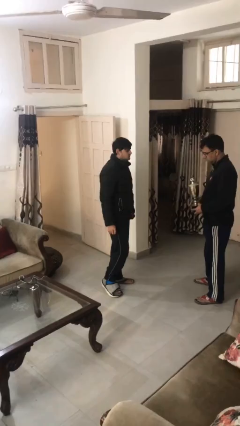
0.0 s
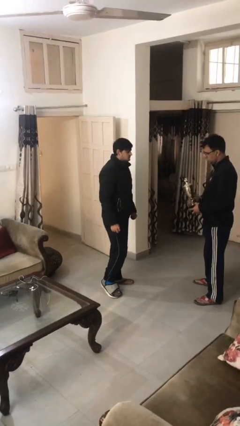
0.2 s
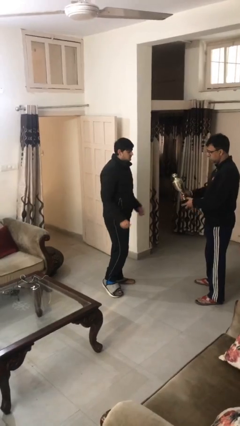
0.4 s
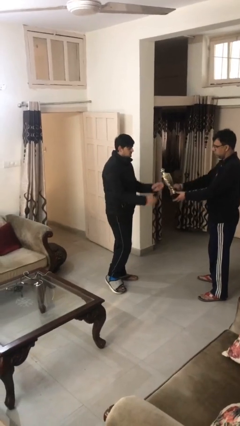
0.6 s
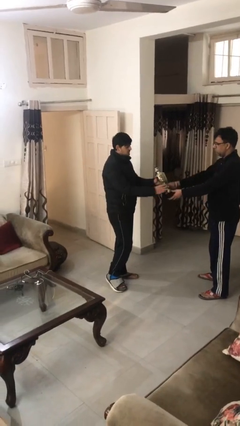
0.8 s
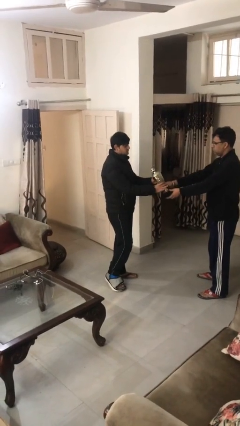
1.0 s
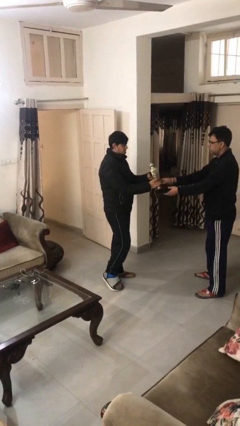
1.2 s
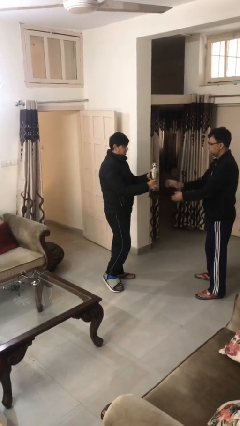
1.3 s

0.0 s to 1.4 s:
person transfers object to person

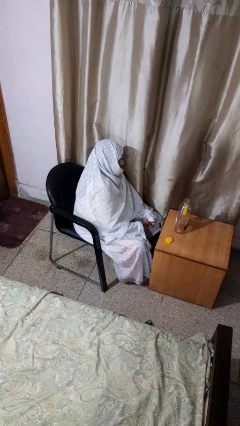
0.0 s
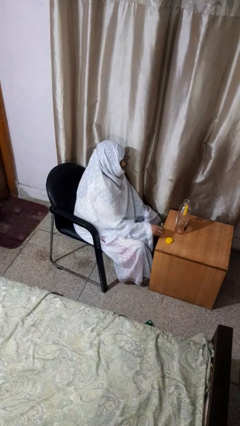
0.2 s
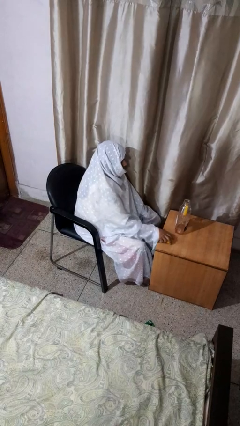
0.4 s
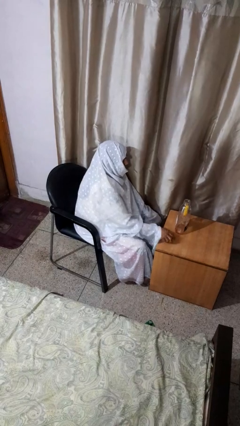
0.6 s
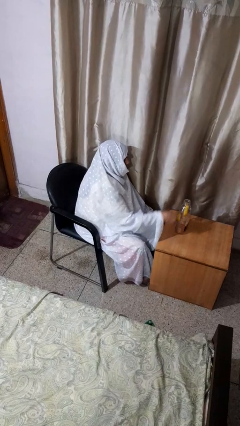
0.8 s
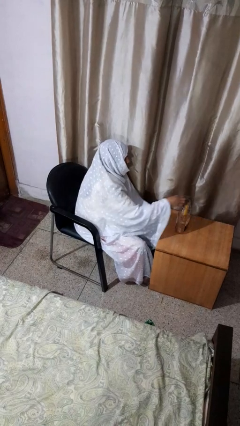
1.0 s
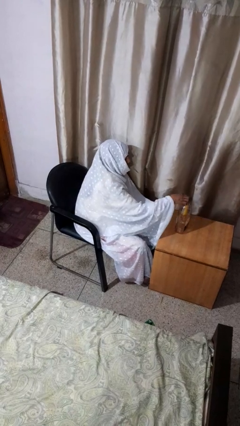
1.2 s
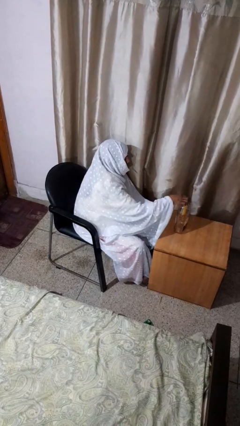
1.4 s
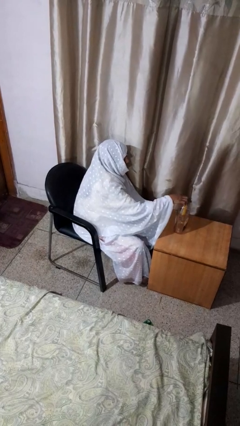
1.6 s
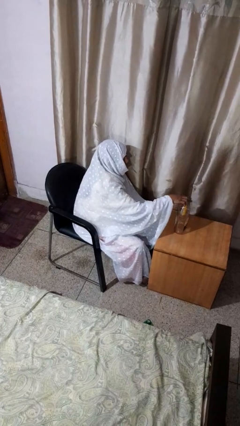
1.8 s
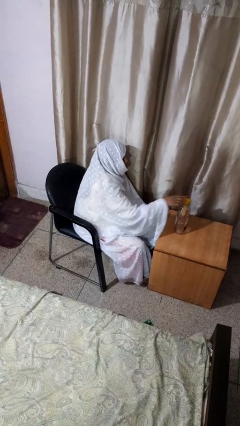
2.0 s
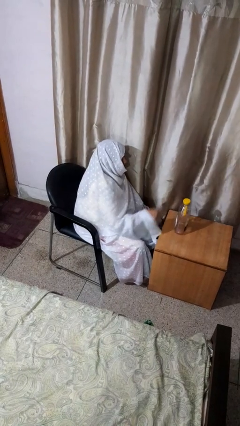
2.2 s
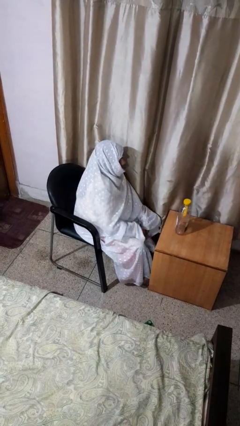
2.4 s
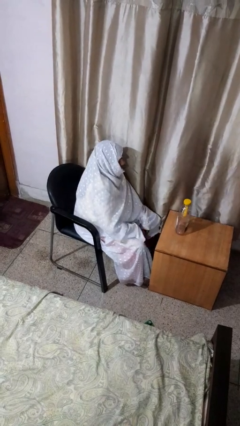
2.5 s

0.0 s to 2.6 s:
person screws lid to bottle

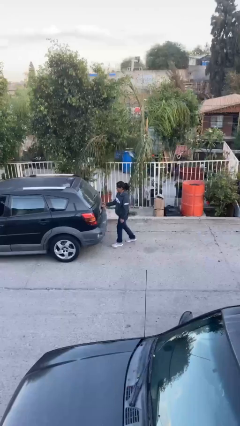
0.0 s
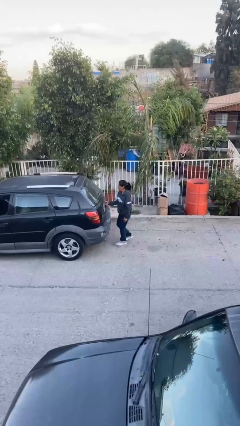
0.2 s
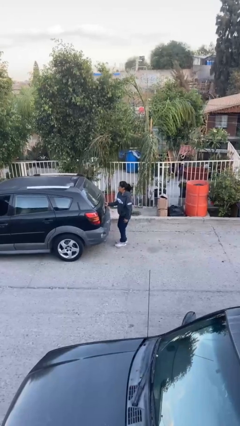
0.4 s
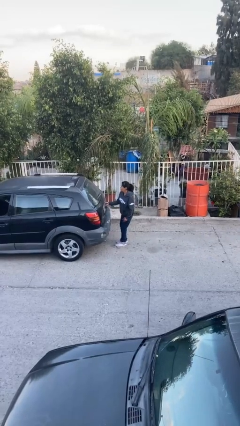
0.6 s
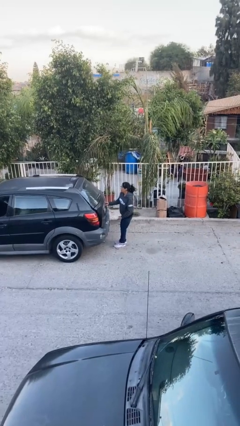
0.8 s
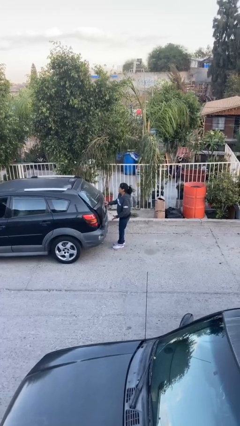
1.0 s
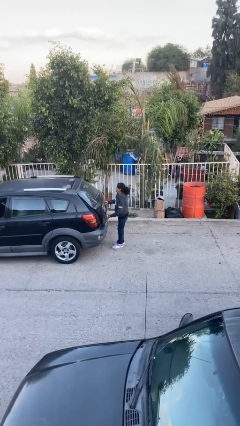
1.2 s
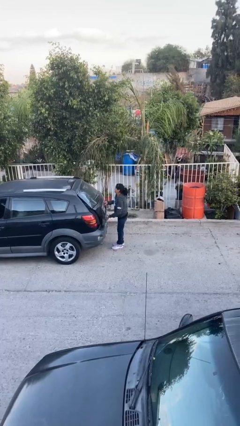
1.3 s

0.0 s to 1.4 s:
person closes car trunk

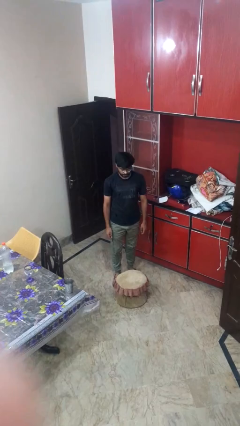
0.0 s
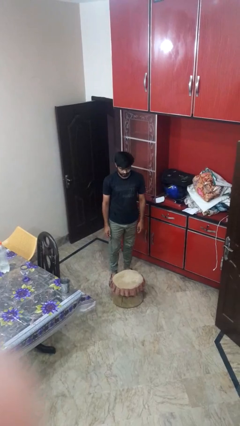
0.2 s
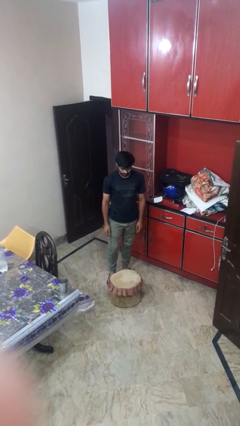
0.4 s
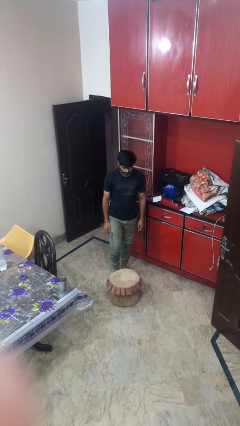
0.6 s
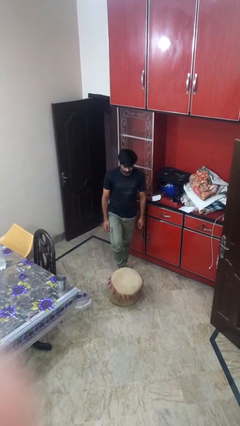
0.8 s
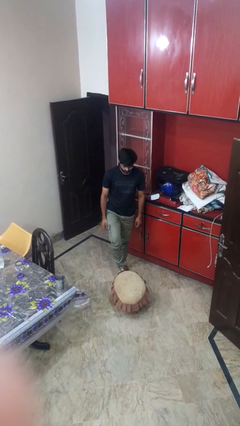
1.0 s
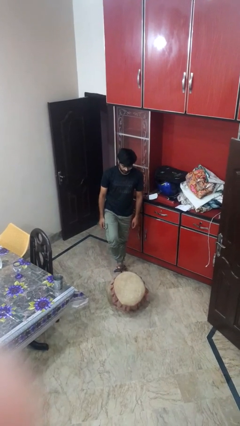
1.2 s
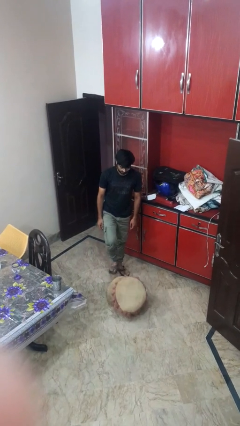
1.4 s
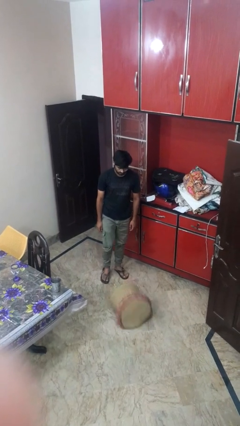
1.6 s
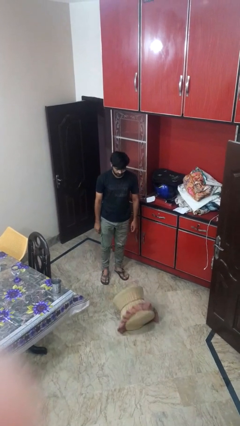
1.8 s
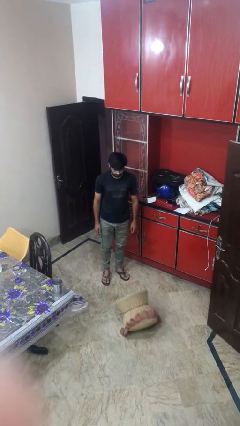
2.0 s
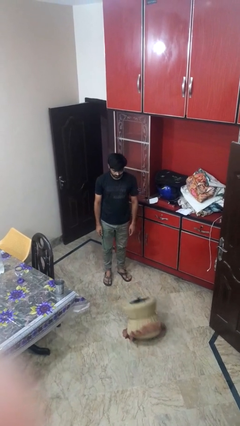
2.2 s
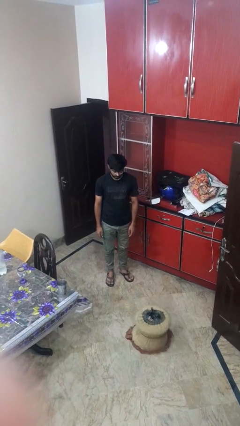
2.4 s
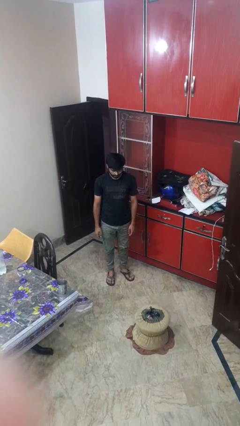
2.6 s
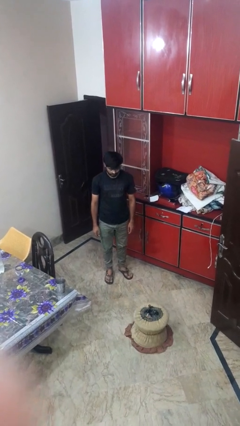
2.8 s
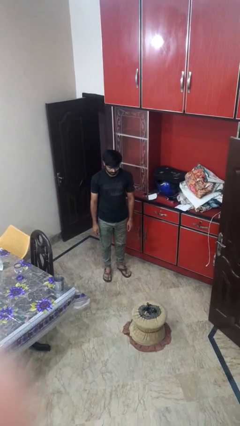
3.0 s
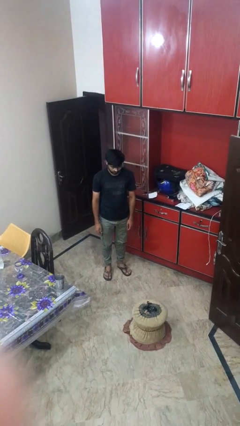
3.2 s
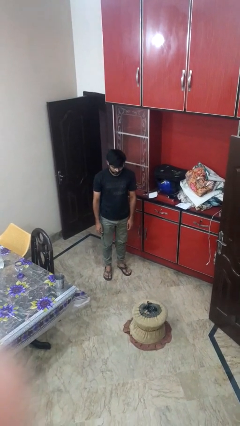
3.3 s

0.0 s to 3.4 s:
person knocks over furniture

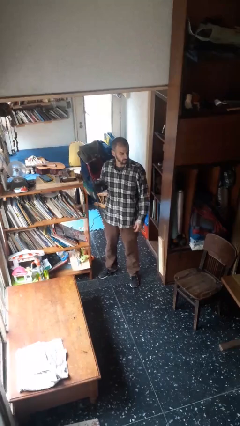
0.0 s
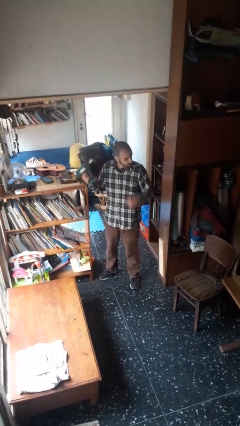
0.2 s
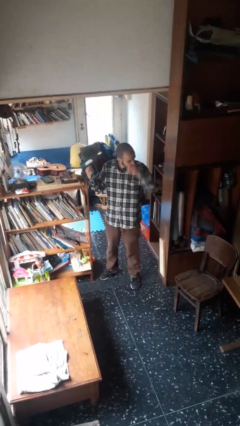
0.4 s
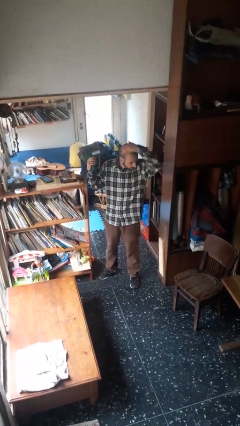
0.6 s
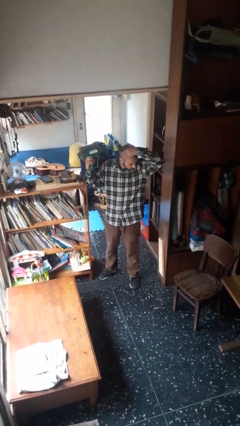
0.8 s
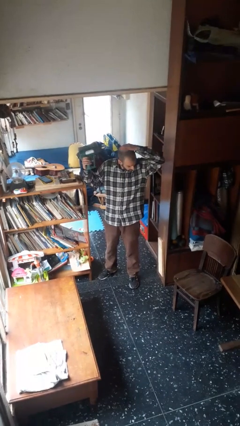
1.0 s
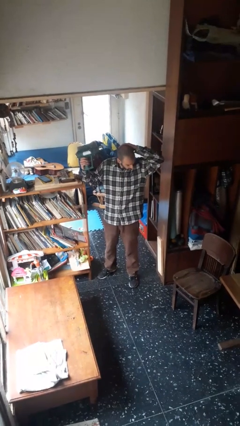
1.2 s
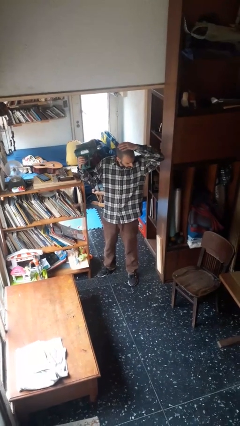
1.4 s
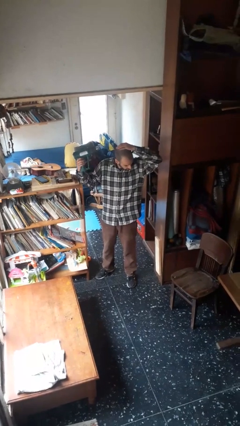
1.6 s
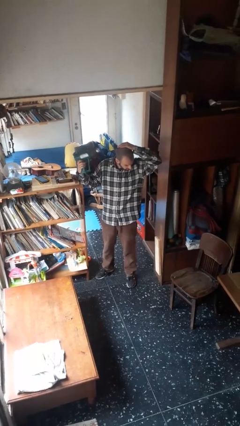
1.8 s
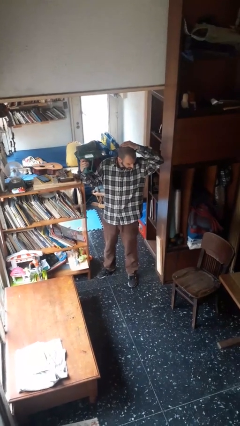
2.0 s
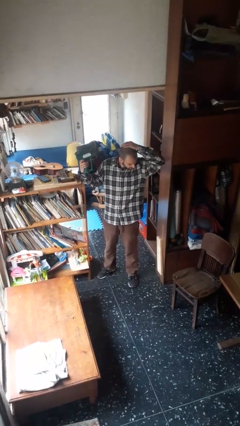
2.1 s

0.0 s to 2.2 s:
person dries hair with hairdryer

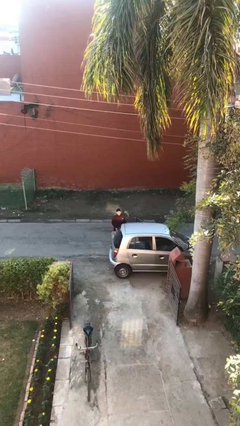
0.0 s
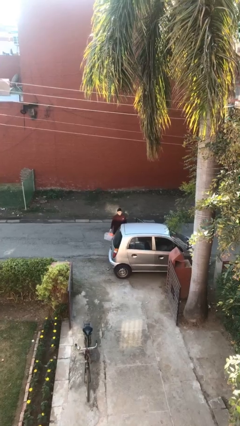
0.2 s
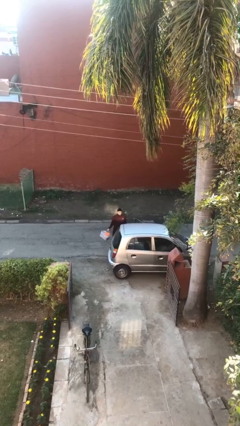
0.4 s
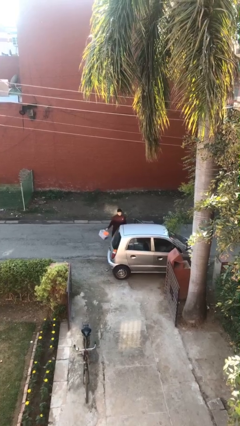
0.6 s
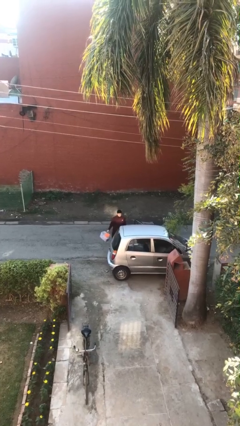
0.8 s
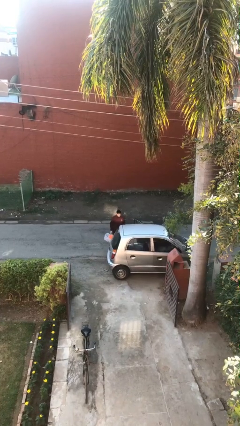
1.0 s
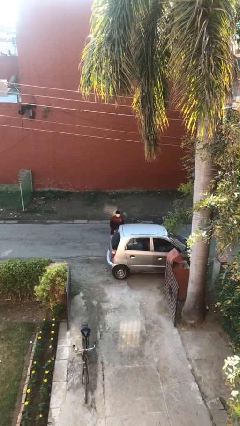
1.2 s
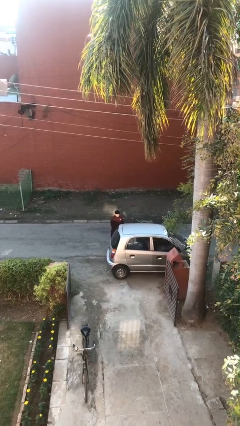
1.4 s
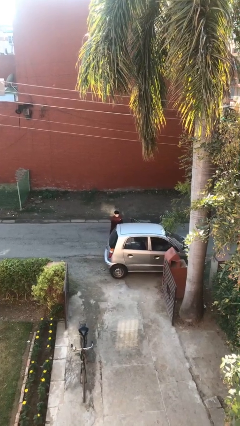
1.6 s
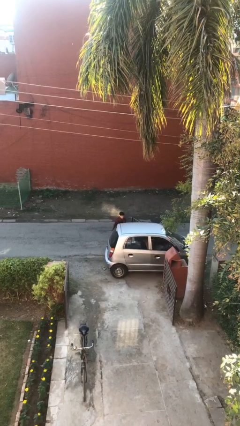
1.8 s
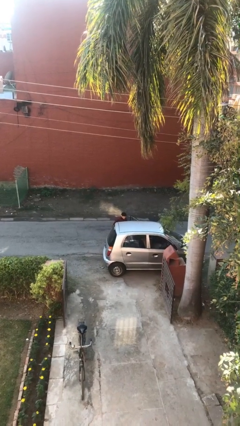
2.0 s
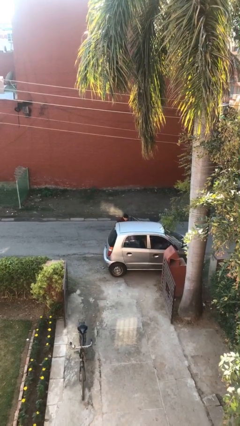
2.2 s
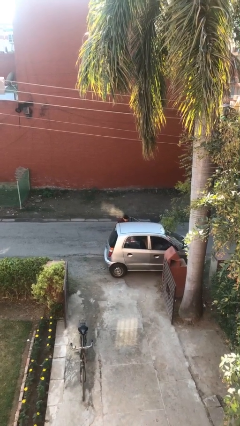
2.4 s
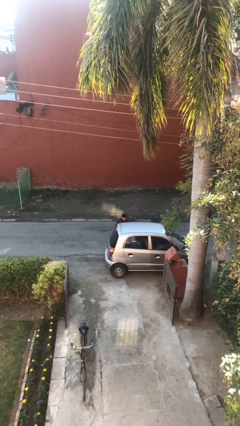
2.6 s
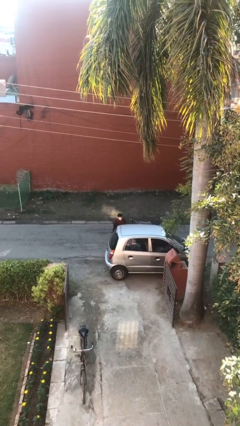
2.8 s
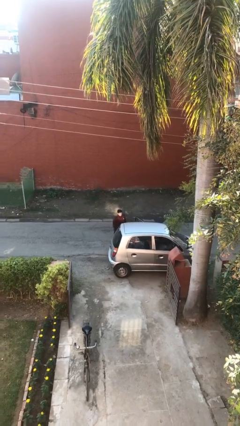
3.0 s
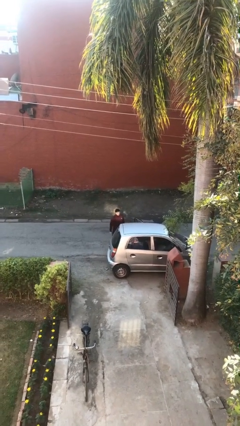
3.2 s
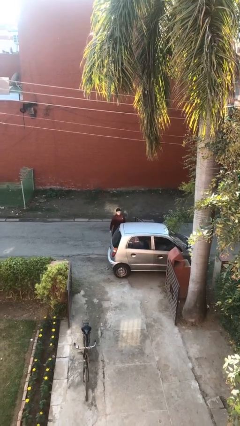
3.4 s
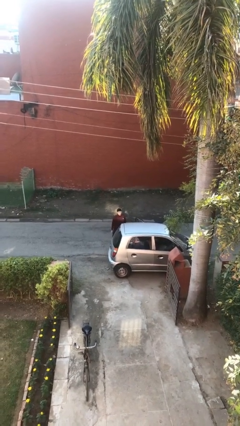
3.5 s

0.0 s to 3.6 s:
person loads car

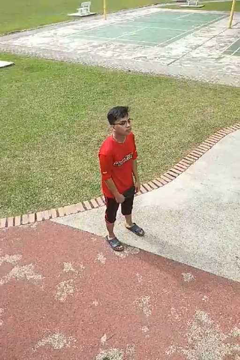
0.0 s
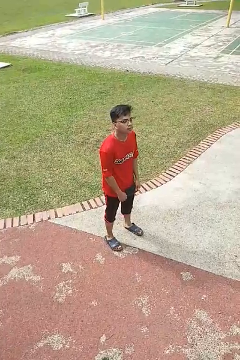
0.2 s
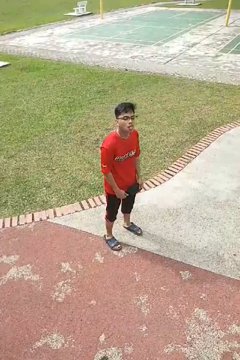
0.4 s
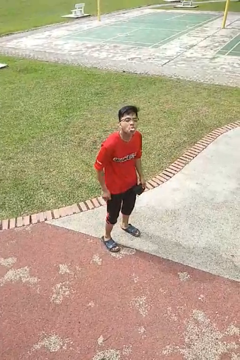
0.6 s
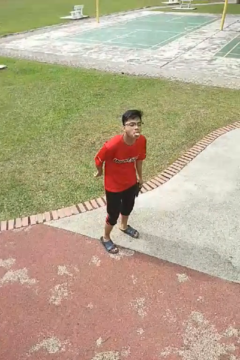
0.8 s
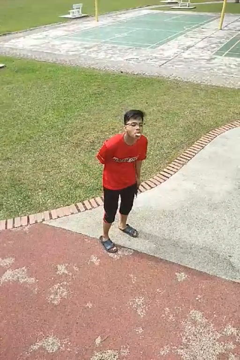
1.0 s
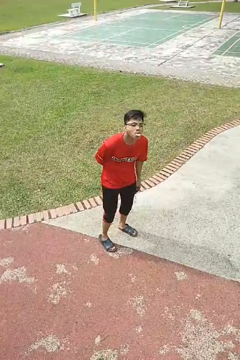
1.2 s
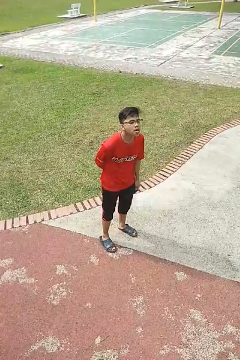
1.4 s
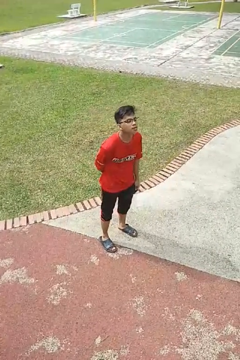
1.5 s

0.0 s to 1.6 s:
person sticks out tongue

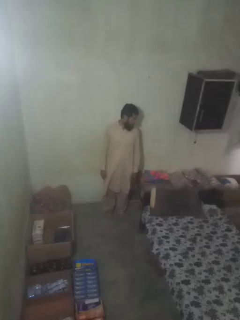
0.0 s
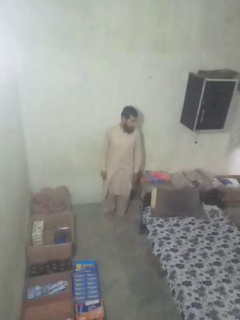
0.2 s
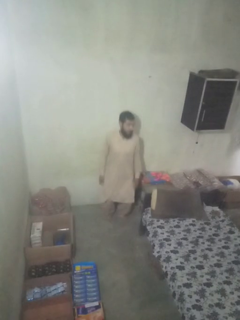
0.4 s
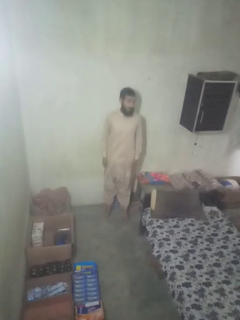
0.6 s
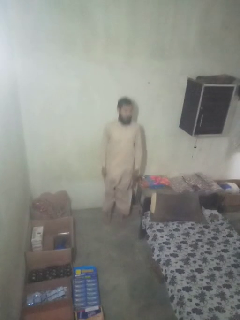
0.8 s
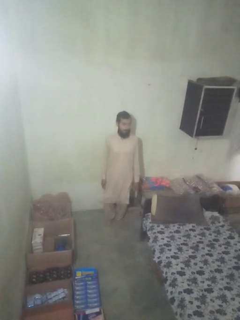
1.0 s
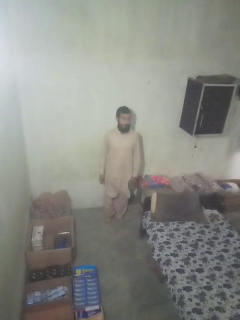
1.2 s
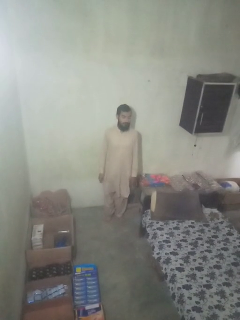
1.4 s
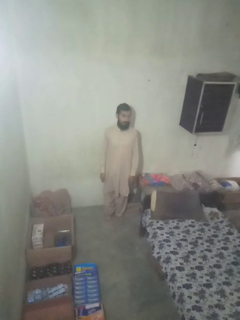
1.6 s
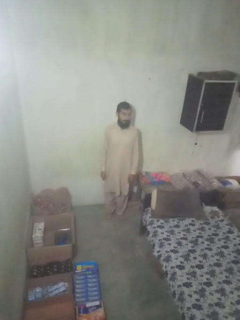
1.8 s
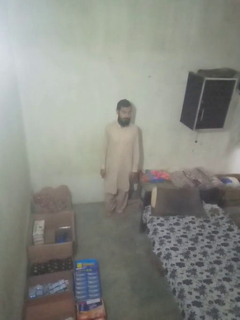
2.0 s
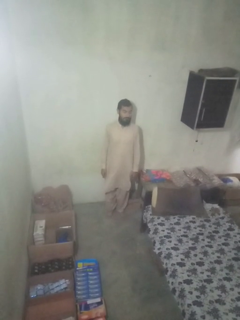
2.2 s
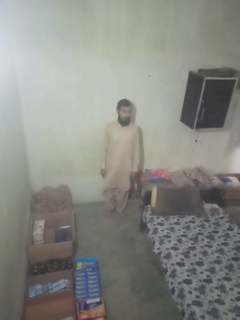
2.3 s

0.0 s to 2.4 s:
person jumps
